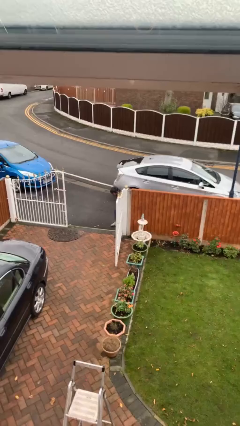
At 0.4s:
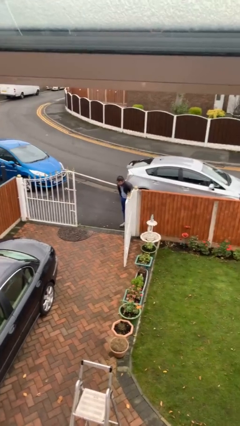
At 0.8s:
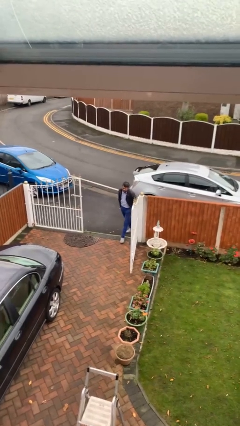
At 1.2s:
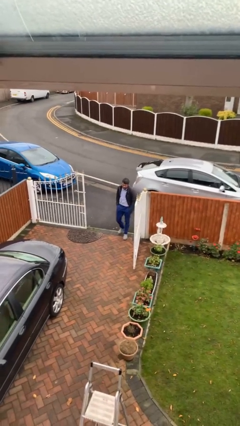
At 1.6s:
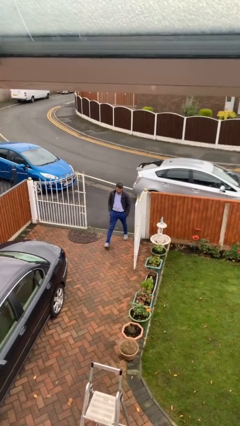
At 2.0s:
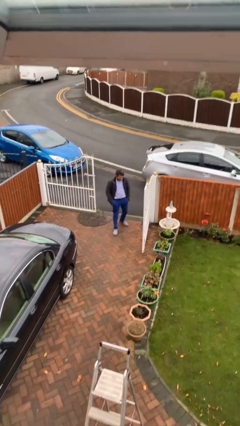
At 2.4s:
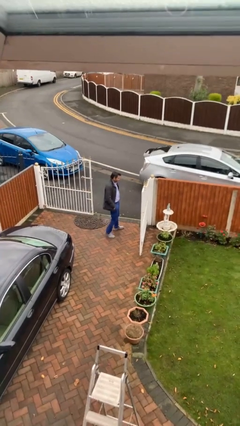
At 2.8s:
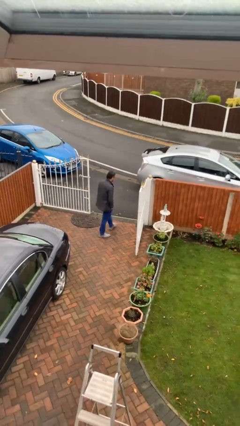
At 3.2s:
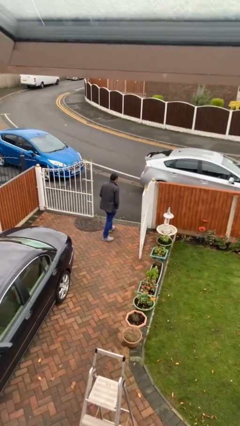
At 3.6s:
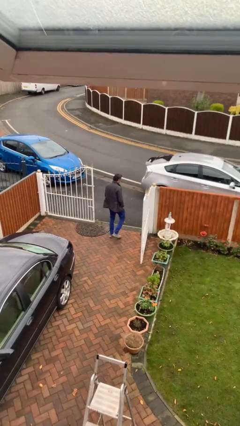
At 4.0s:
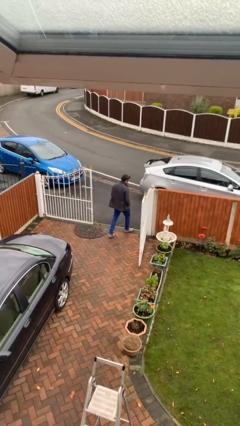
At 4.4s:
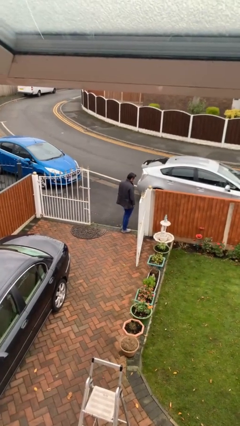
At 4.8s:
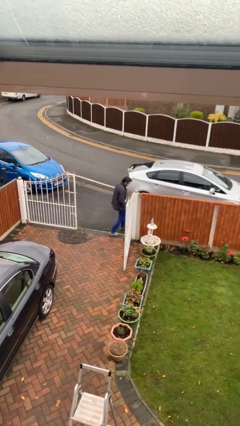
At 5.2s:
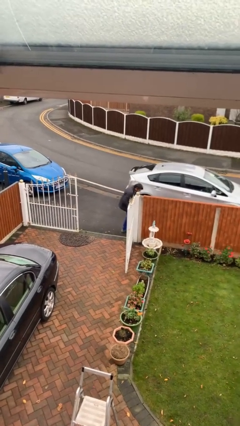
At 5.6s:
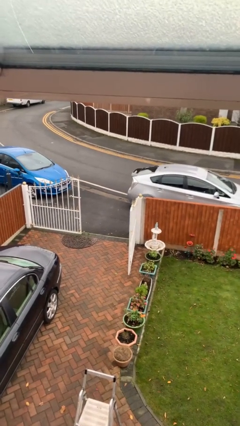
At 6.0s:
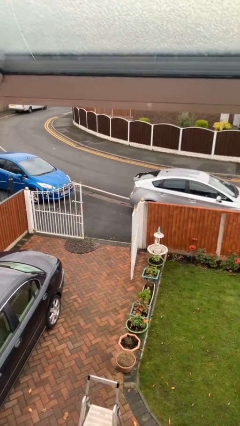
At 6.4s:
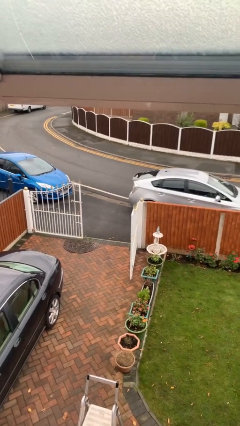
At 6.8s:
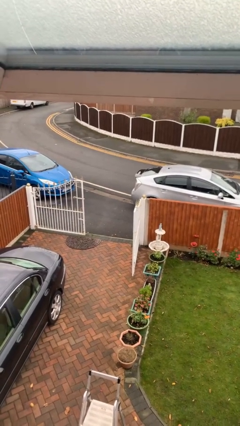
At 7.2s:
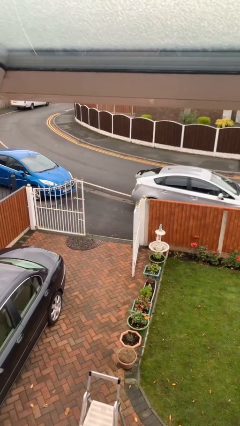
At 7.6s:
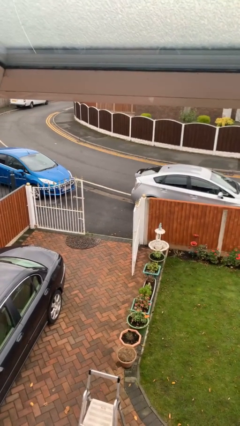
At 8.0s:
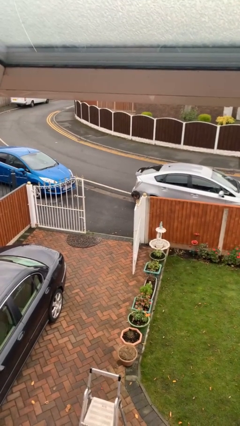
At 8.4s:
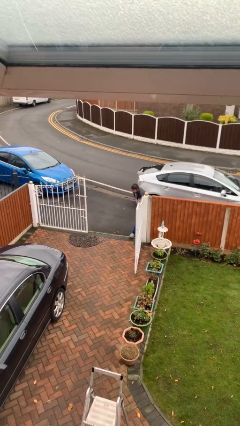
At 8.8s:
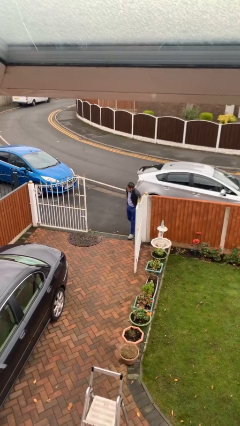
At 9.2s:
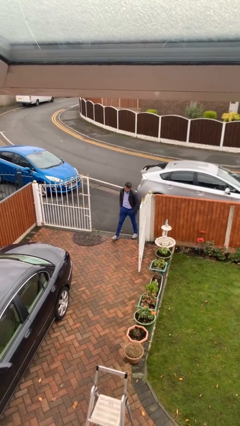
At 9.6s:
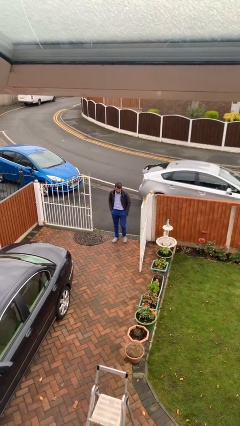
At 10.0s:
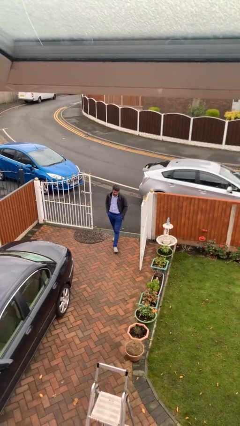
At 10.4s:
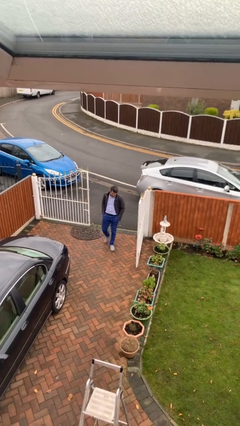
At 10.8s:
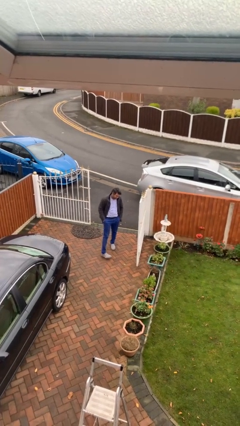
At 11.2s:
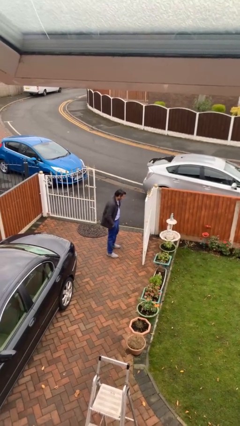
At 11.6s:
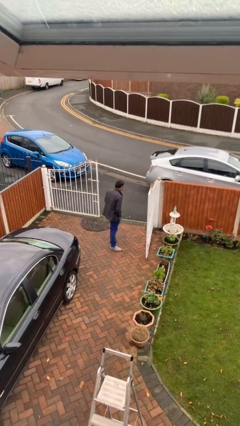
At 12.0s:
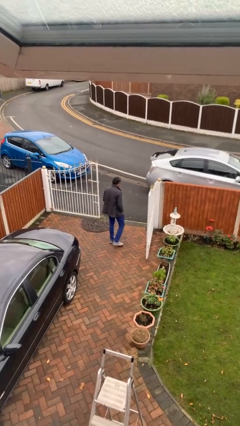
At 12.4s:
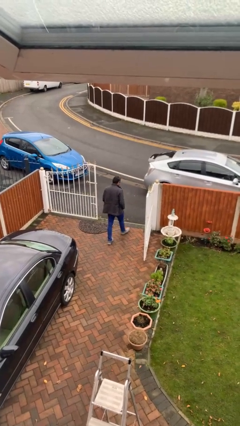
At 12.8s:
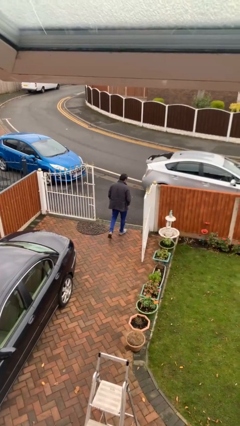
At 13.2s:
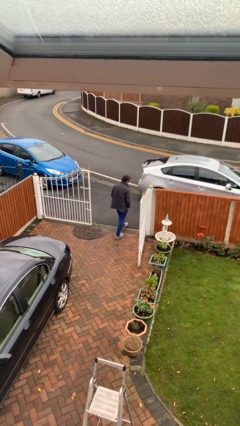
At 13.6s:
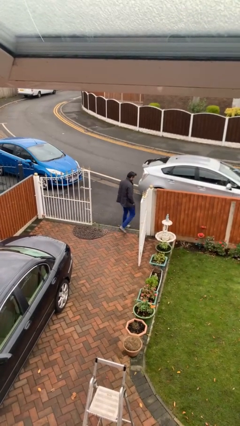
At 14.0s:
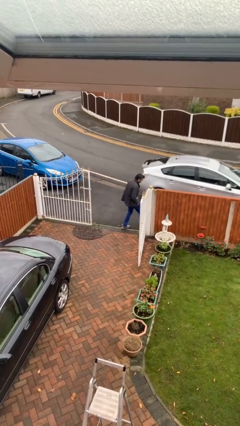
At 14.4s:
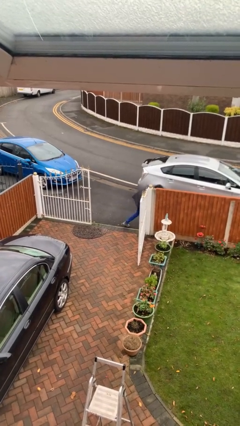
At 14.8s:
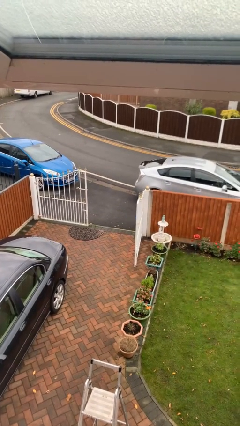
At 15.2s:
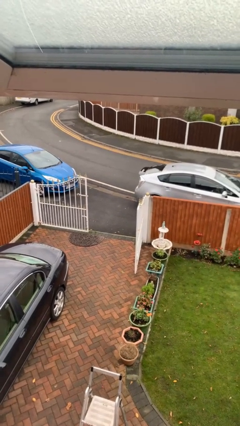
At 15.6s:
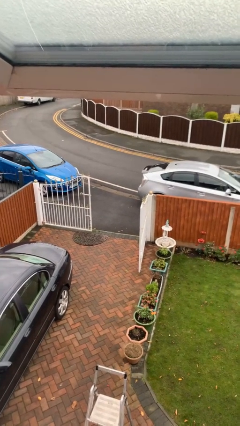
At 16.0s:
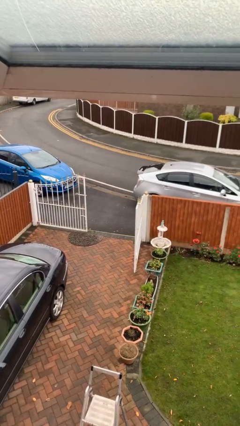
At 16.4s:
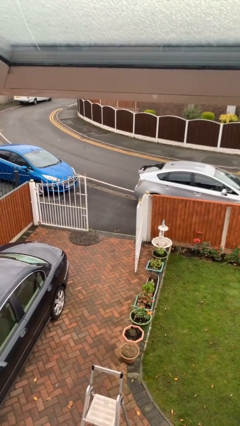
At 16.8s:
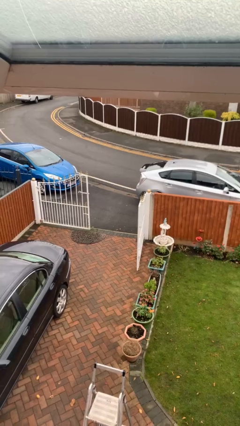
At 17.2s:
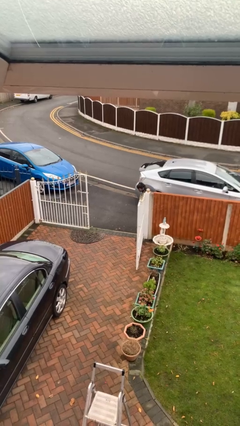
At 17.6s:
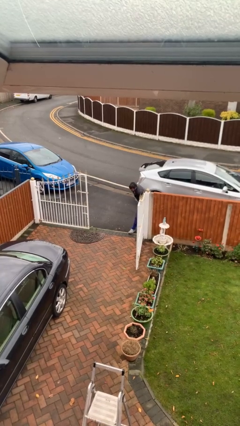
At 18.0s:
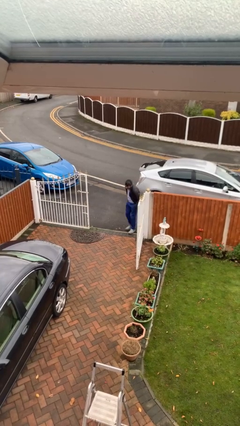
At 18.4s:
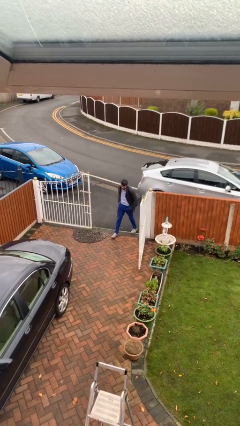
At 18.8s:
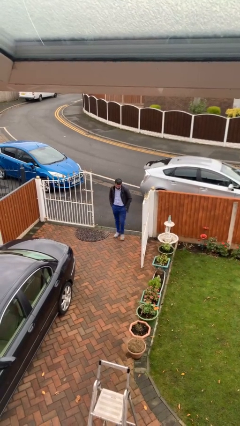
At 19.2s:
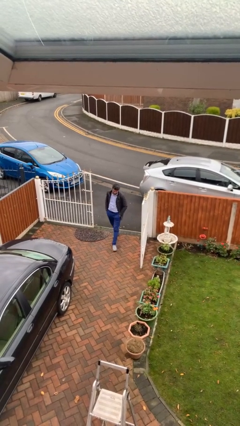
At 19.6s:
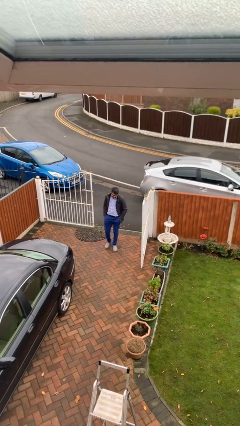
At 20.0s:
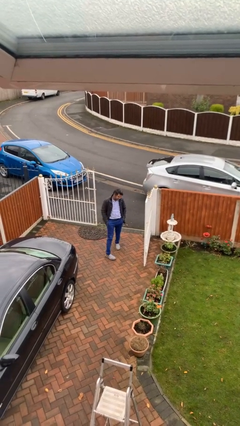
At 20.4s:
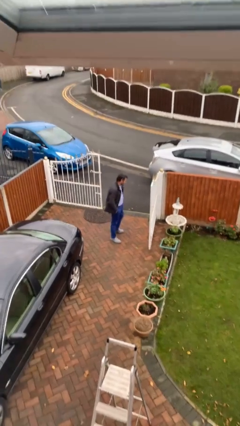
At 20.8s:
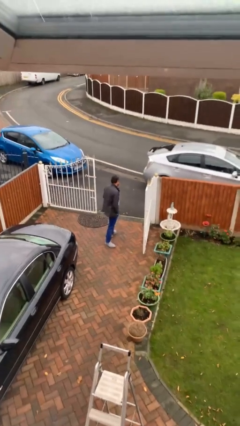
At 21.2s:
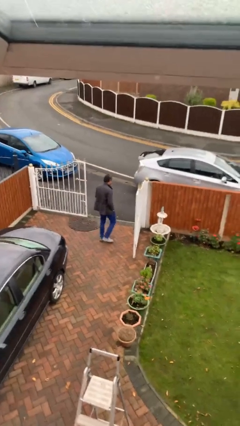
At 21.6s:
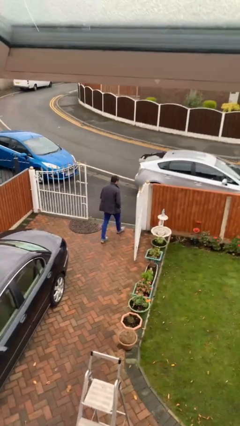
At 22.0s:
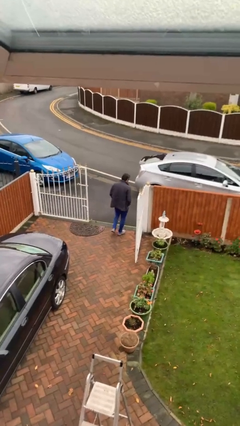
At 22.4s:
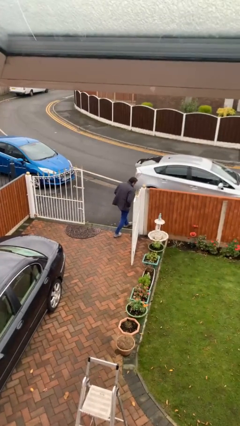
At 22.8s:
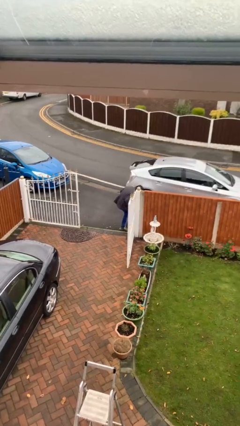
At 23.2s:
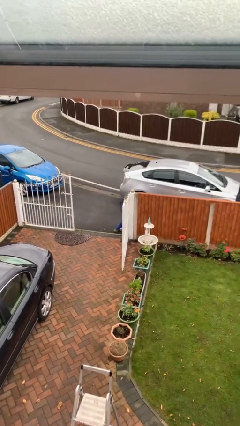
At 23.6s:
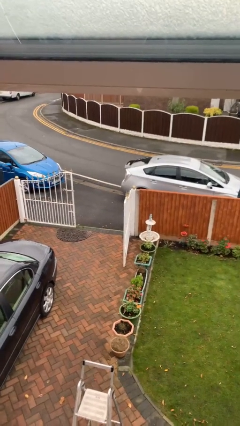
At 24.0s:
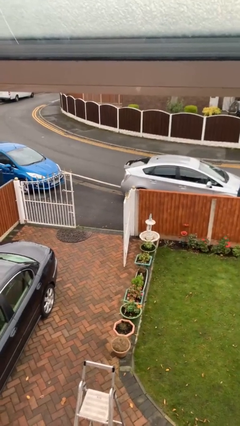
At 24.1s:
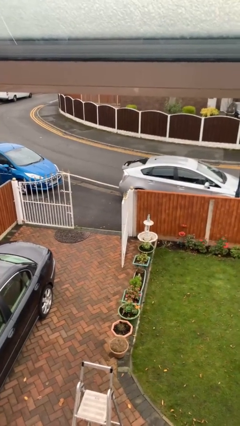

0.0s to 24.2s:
person texts on phone

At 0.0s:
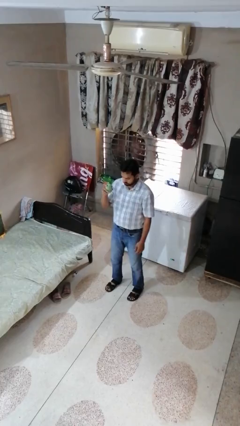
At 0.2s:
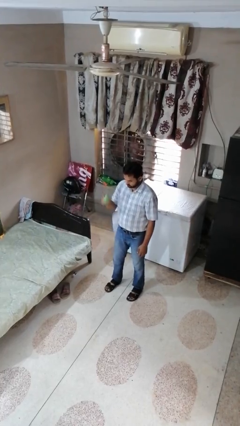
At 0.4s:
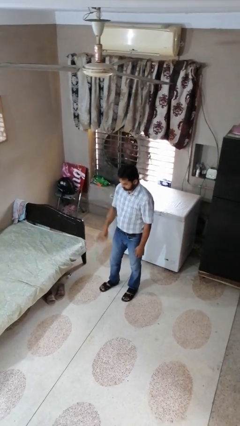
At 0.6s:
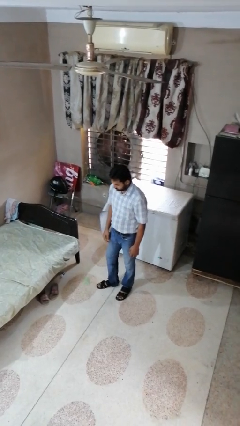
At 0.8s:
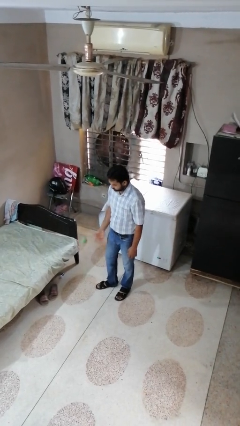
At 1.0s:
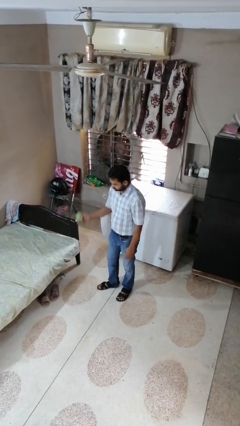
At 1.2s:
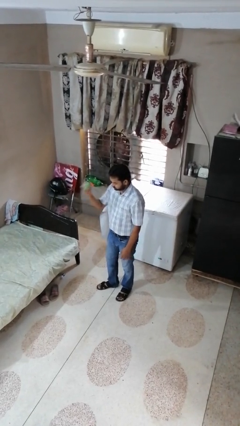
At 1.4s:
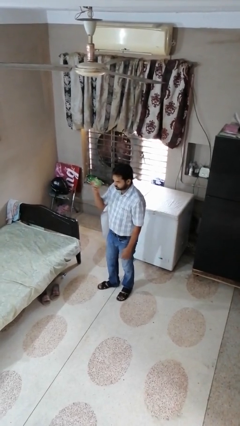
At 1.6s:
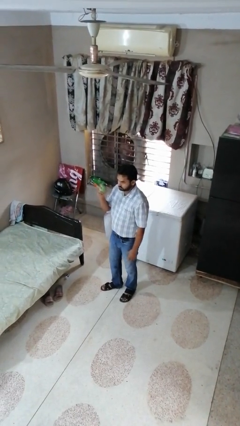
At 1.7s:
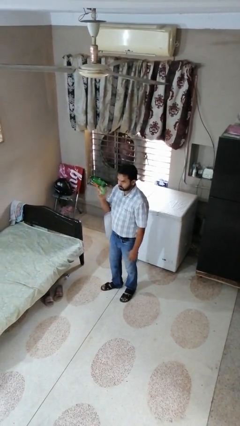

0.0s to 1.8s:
person bounces ball on floor

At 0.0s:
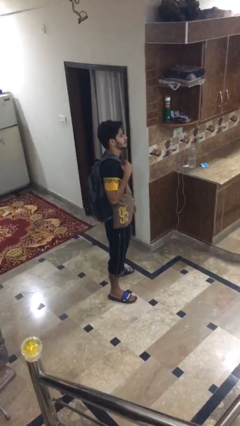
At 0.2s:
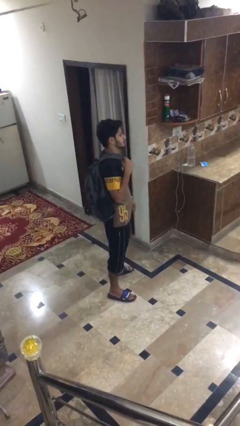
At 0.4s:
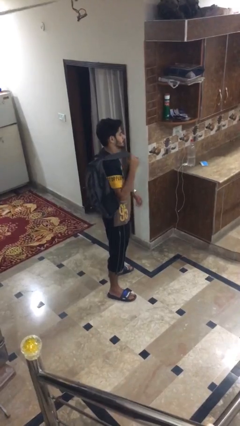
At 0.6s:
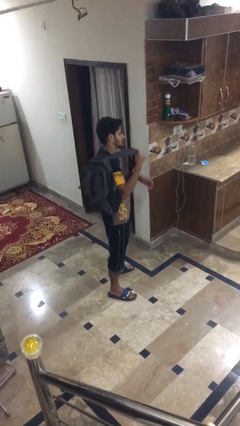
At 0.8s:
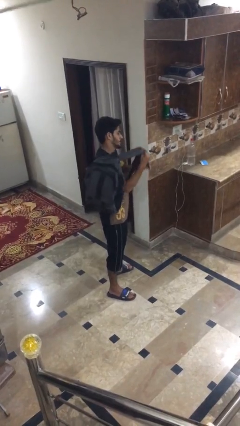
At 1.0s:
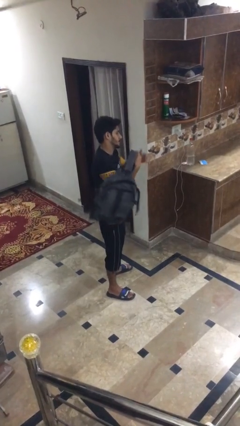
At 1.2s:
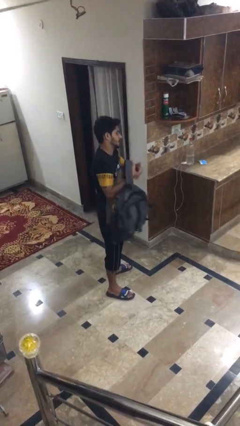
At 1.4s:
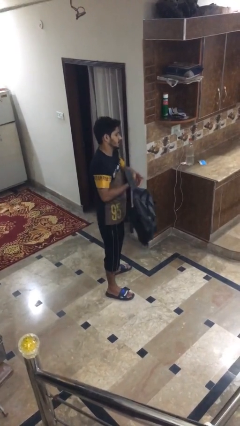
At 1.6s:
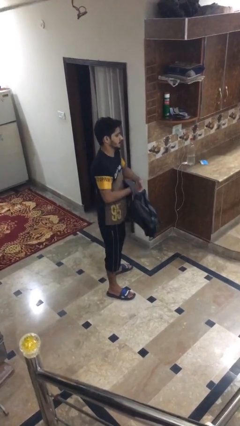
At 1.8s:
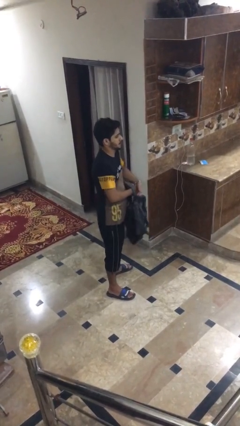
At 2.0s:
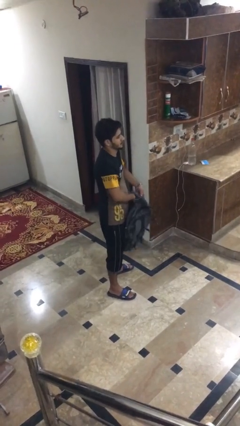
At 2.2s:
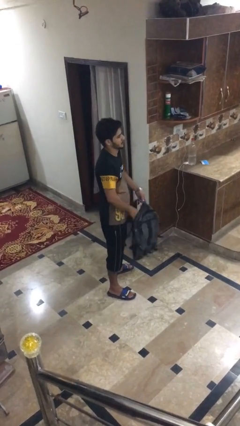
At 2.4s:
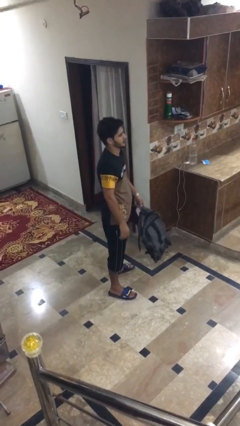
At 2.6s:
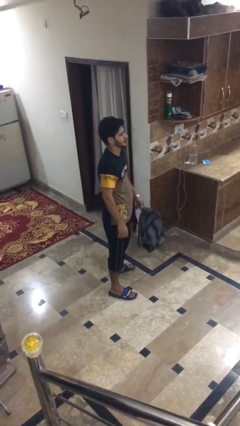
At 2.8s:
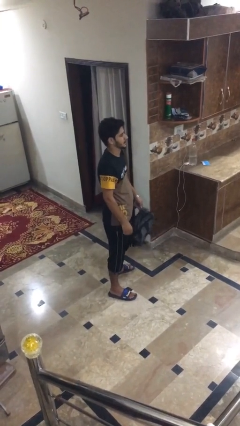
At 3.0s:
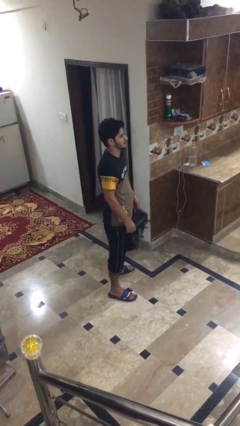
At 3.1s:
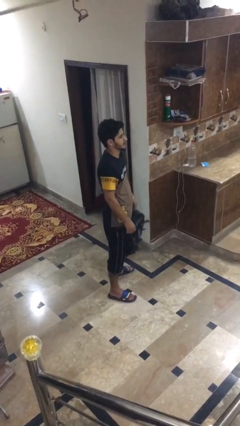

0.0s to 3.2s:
person takes off backpack

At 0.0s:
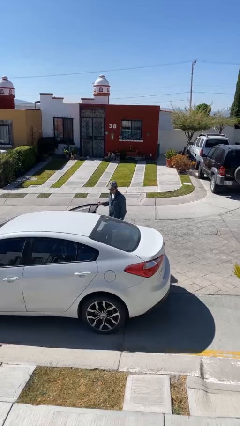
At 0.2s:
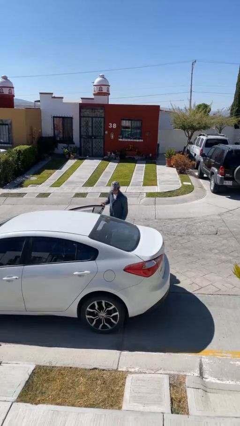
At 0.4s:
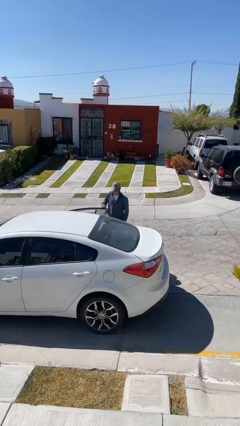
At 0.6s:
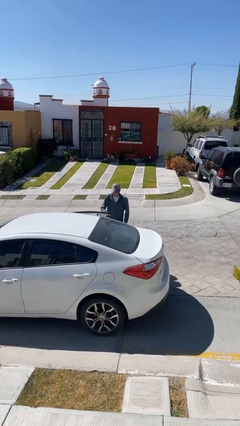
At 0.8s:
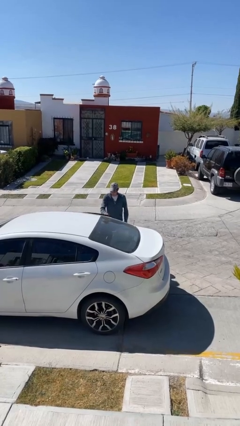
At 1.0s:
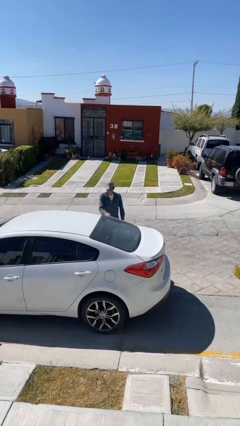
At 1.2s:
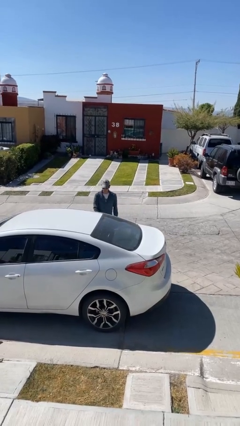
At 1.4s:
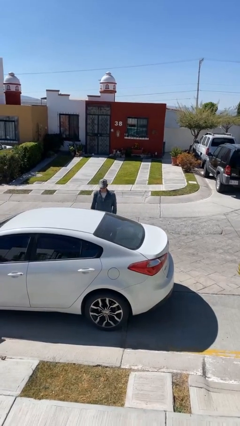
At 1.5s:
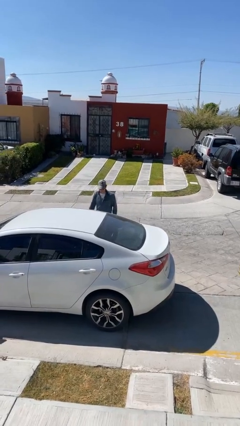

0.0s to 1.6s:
person closes car door
